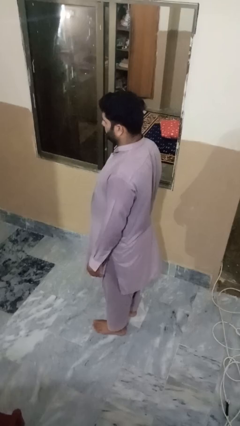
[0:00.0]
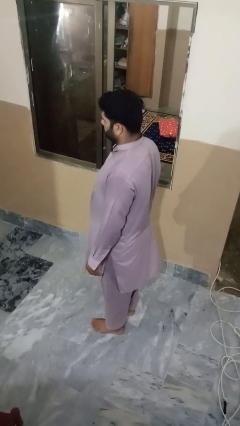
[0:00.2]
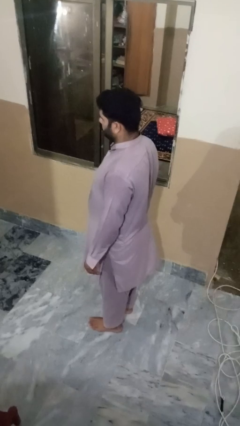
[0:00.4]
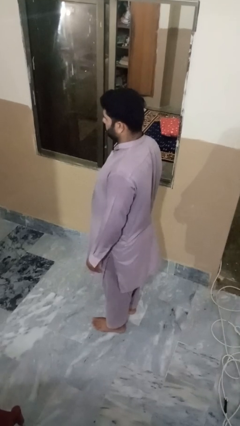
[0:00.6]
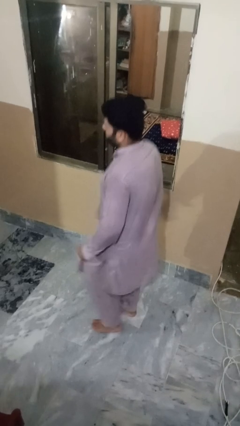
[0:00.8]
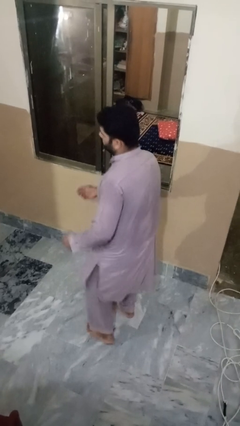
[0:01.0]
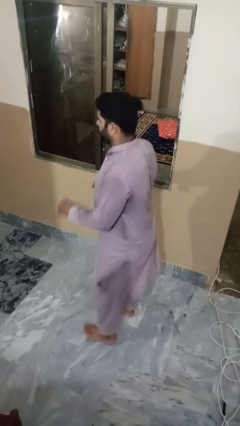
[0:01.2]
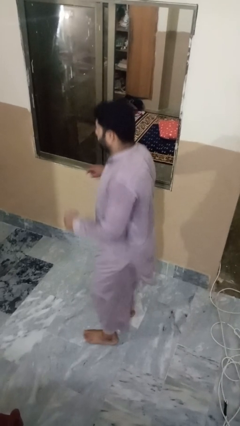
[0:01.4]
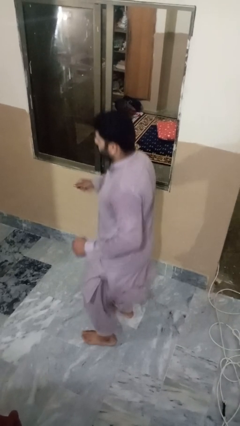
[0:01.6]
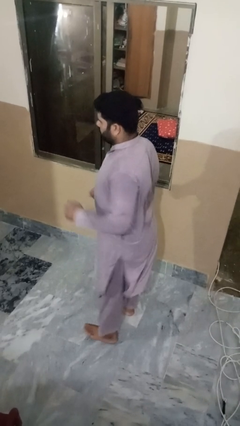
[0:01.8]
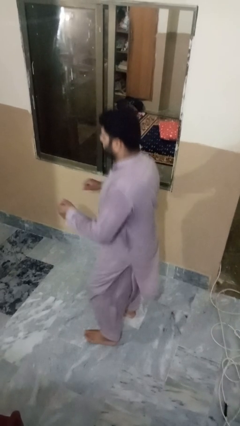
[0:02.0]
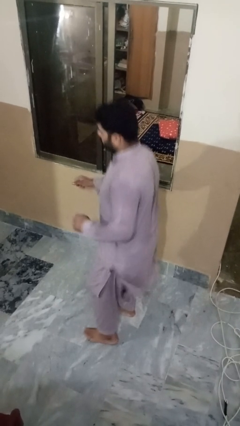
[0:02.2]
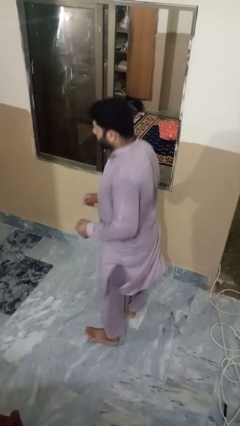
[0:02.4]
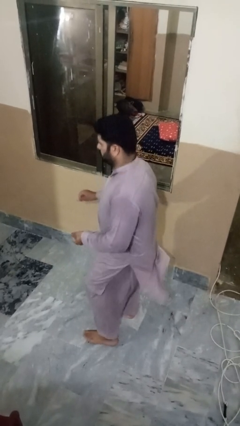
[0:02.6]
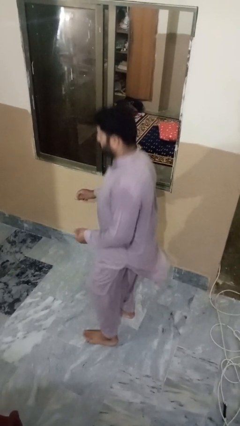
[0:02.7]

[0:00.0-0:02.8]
person dances in place

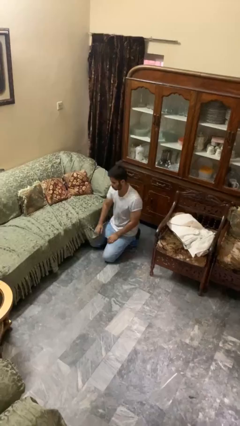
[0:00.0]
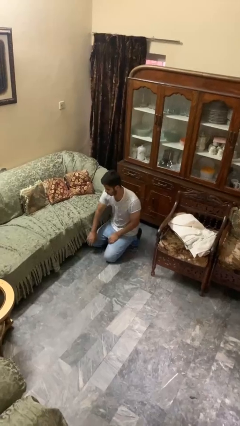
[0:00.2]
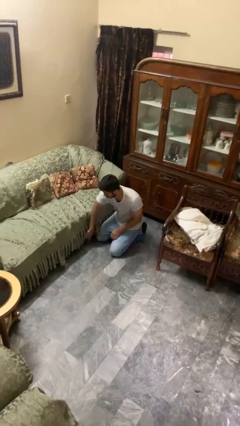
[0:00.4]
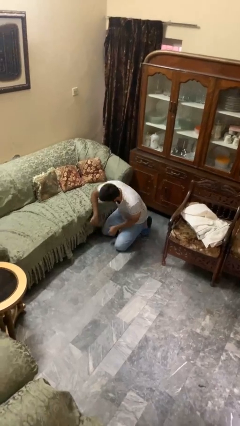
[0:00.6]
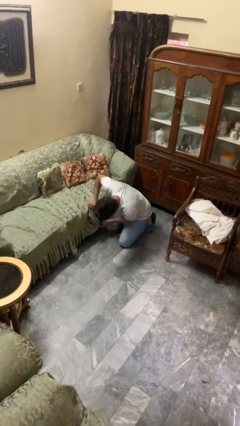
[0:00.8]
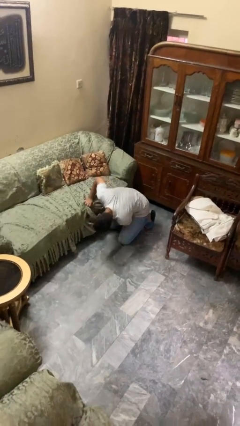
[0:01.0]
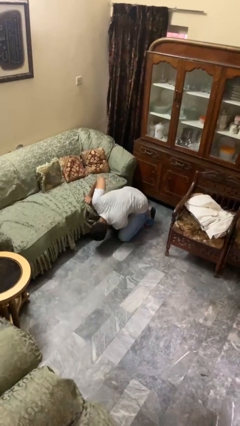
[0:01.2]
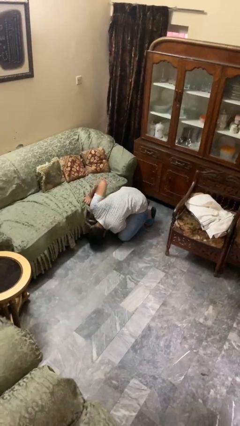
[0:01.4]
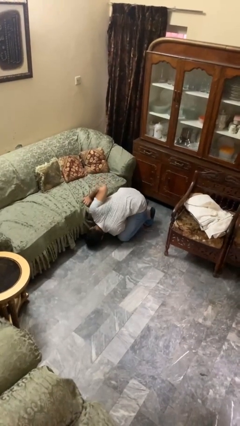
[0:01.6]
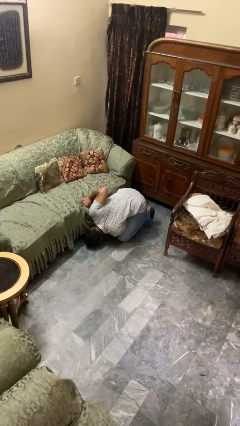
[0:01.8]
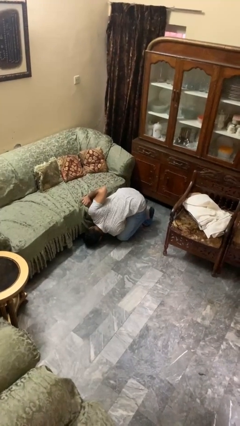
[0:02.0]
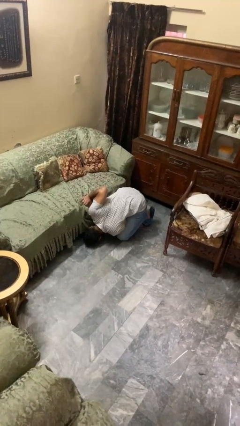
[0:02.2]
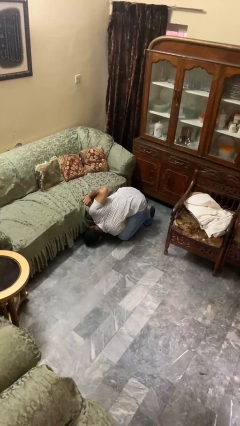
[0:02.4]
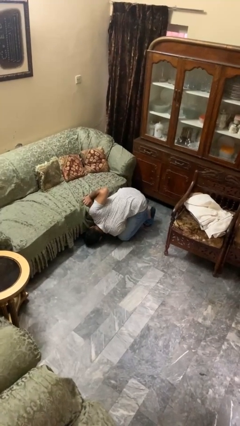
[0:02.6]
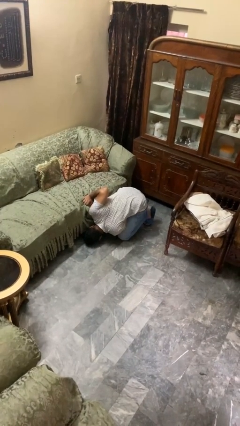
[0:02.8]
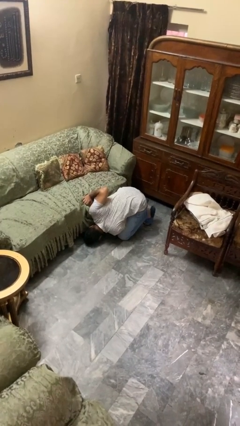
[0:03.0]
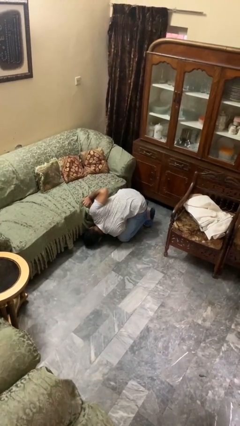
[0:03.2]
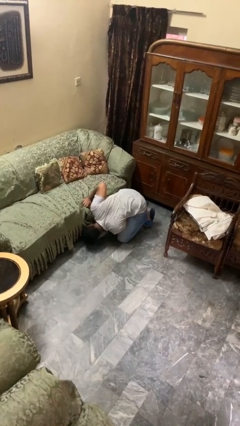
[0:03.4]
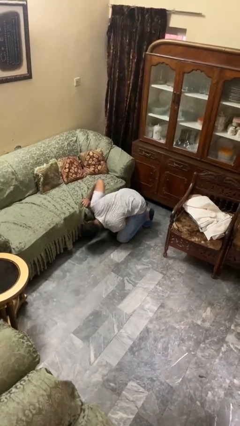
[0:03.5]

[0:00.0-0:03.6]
person searches under couch

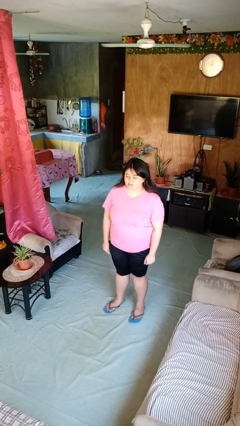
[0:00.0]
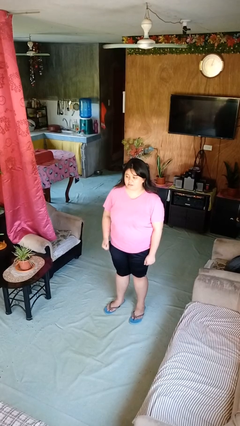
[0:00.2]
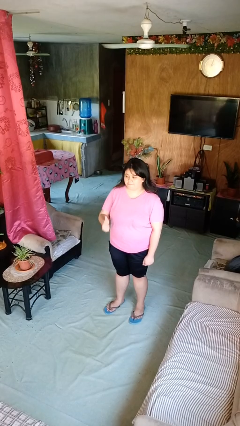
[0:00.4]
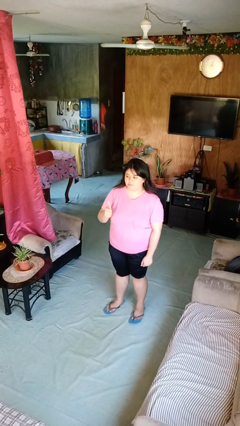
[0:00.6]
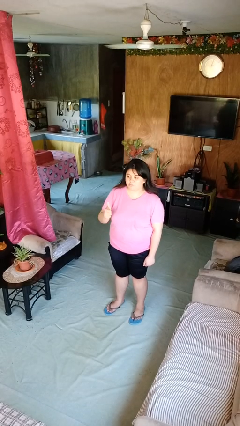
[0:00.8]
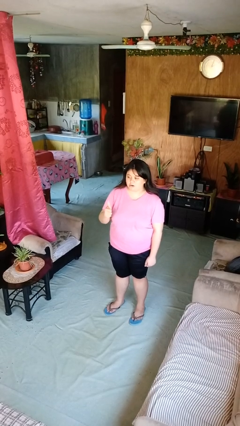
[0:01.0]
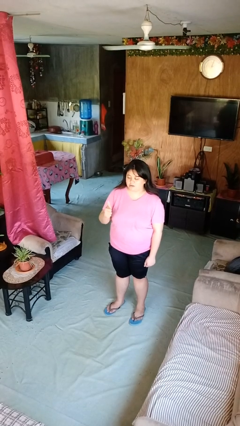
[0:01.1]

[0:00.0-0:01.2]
person gestures thumbs up

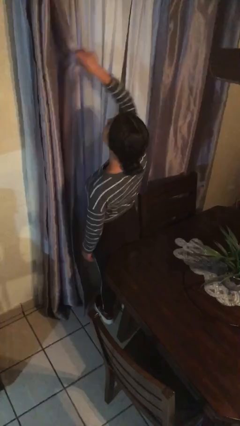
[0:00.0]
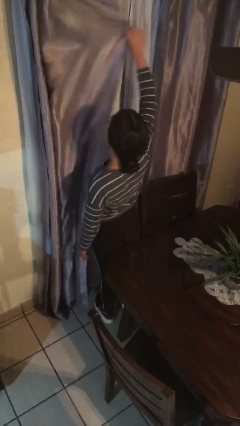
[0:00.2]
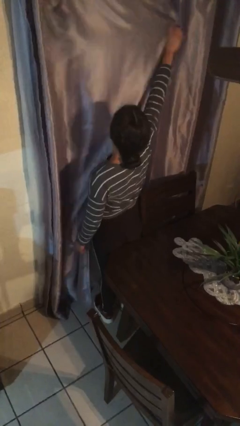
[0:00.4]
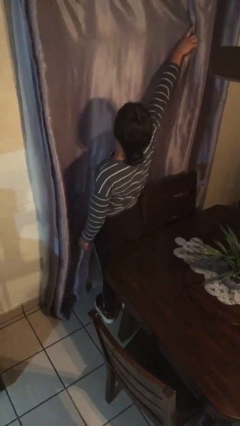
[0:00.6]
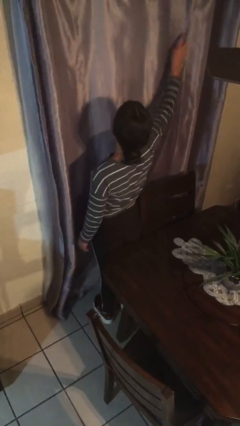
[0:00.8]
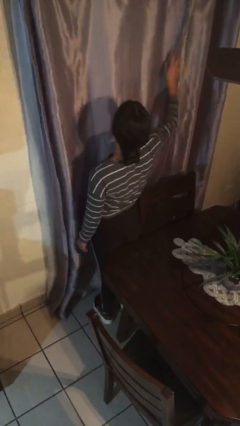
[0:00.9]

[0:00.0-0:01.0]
person closes curtains

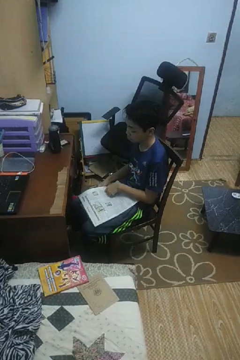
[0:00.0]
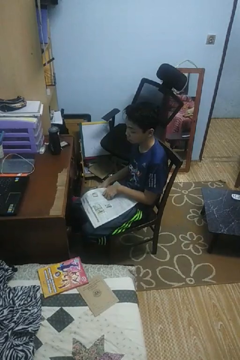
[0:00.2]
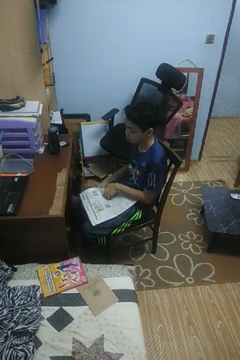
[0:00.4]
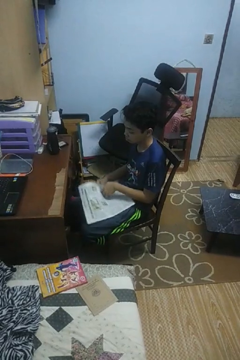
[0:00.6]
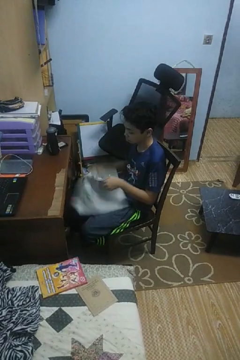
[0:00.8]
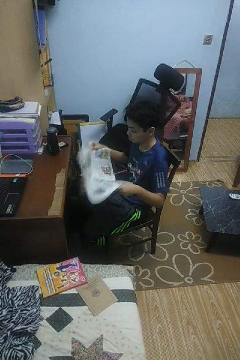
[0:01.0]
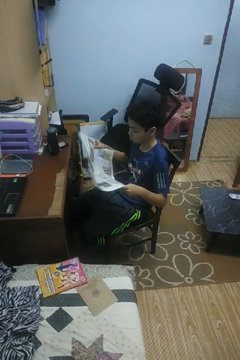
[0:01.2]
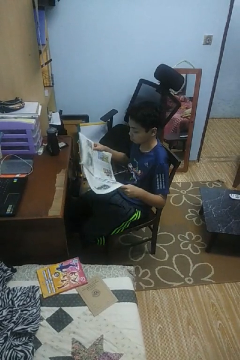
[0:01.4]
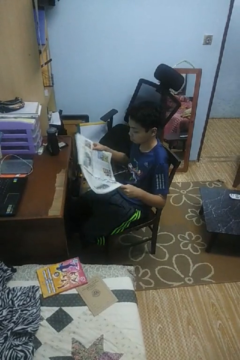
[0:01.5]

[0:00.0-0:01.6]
person reads newspaper

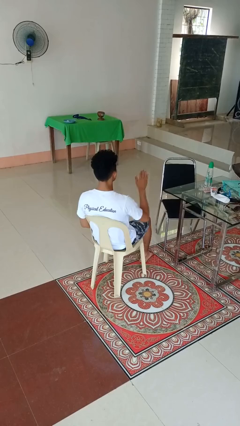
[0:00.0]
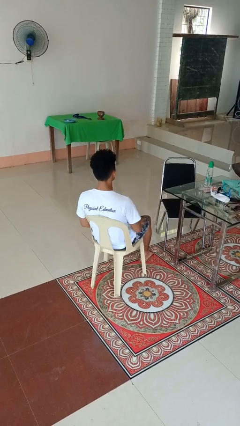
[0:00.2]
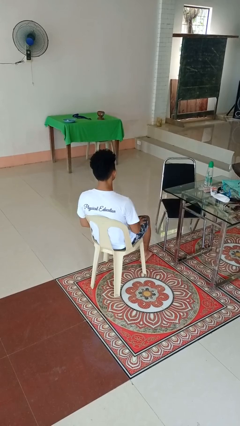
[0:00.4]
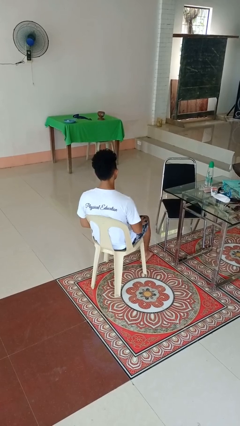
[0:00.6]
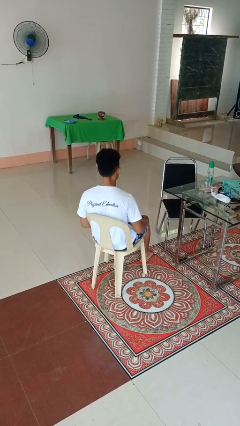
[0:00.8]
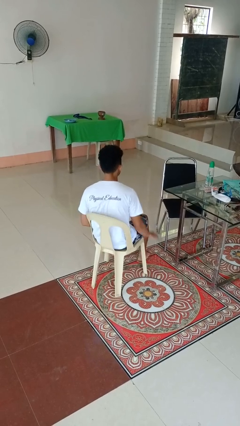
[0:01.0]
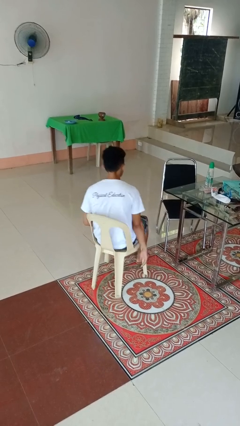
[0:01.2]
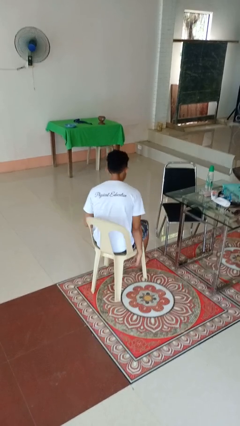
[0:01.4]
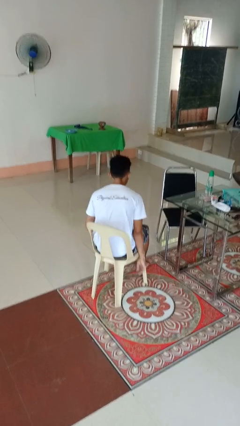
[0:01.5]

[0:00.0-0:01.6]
person slaps hands on thighs

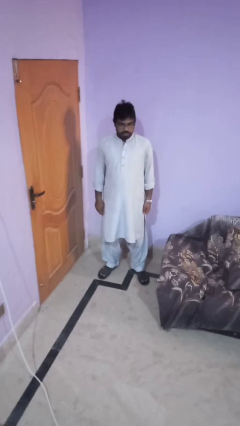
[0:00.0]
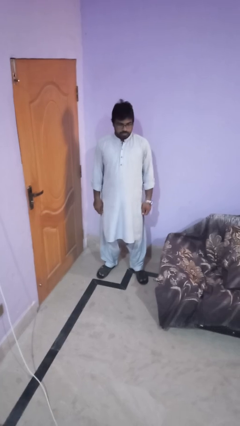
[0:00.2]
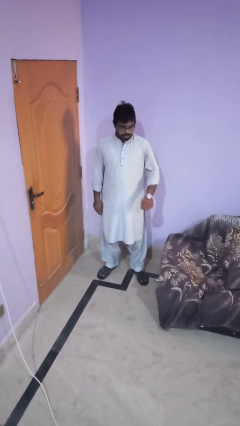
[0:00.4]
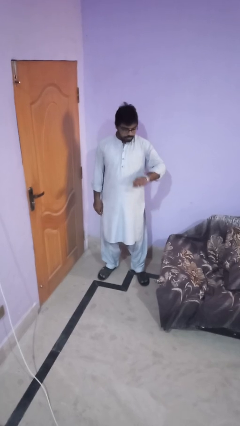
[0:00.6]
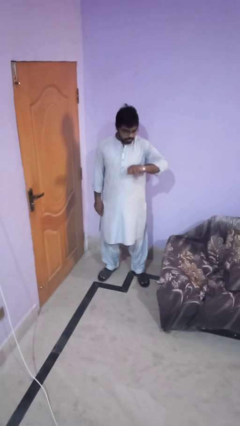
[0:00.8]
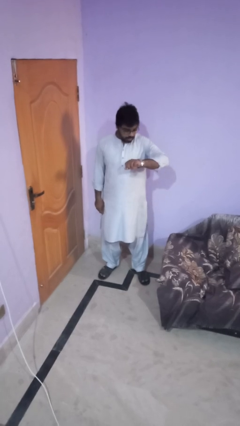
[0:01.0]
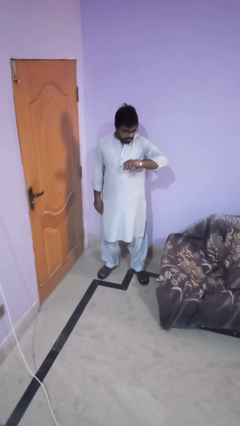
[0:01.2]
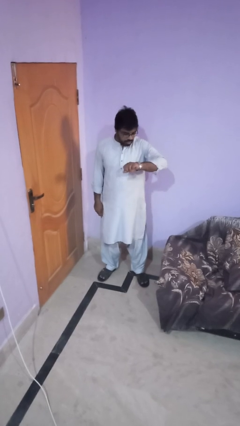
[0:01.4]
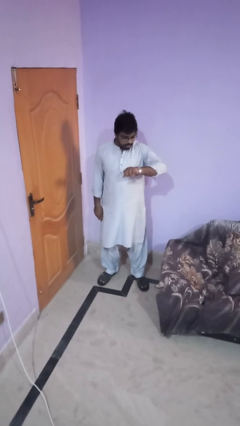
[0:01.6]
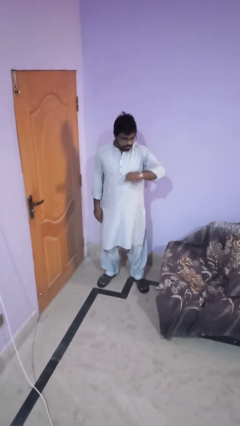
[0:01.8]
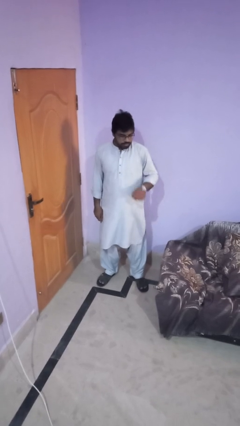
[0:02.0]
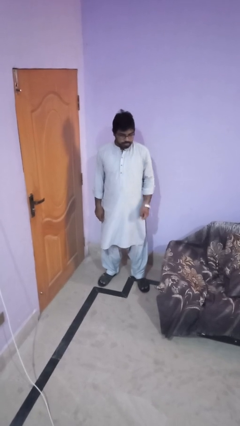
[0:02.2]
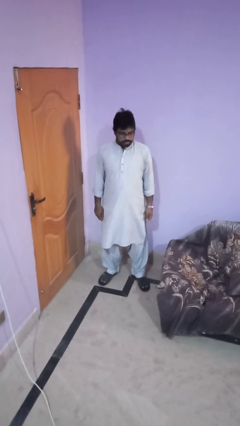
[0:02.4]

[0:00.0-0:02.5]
person looks at wristwatch

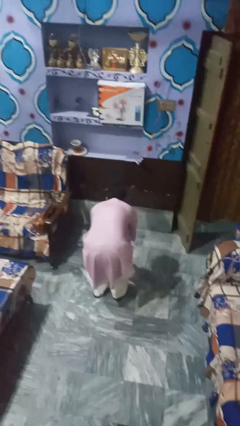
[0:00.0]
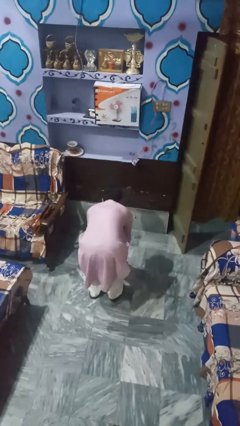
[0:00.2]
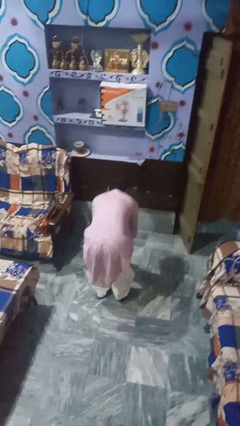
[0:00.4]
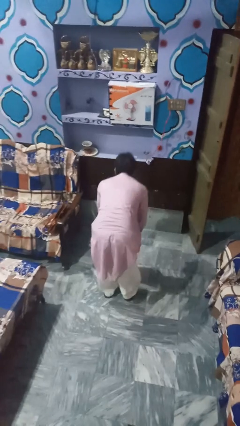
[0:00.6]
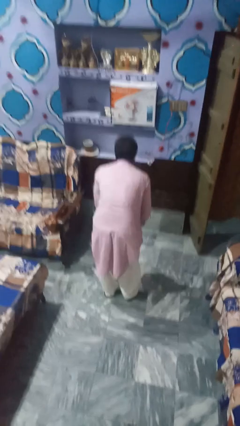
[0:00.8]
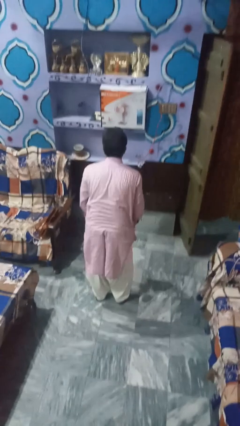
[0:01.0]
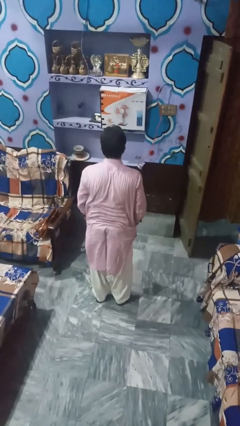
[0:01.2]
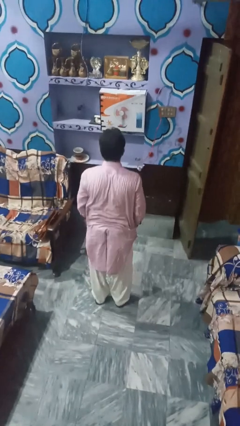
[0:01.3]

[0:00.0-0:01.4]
person picks up object from floor

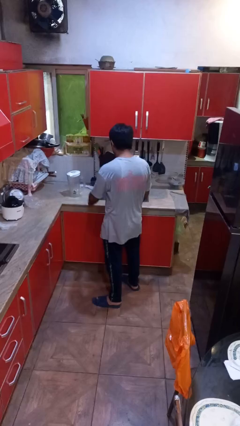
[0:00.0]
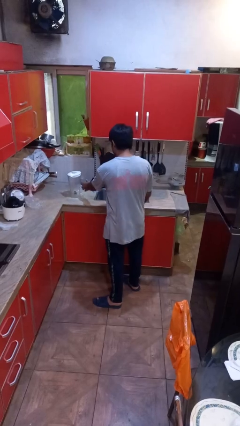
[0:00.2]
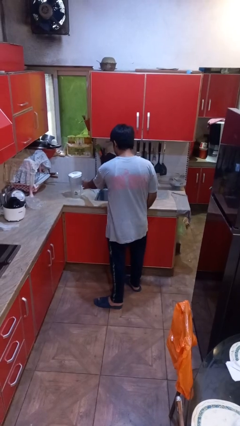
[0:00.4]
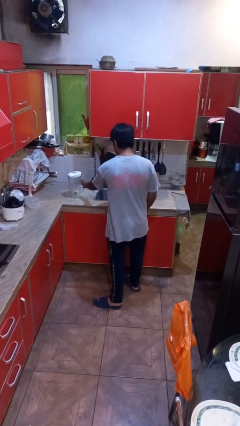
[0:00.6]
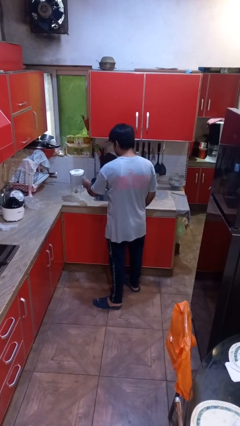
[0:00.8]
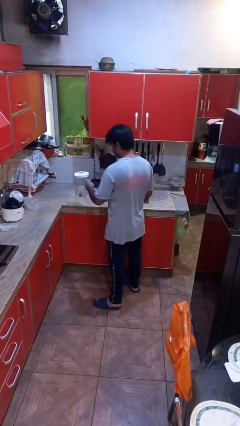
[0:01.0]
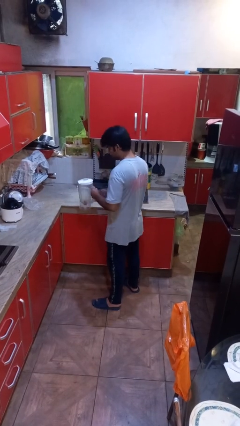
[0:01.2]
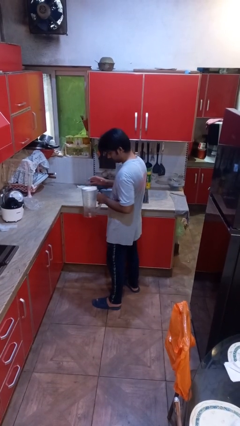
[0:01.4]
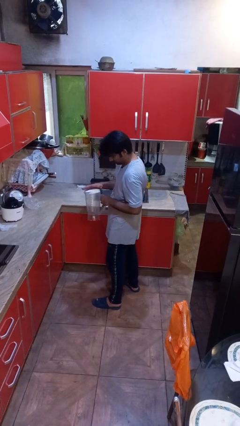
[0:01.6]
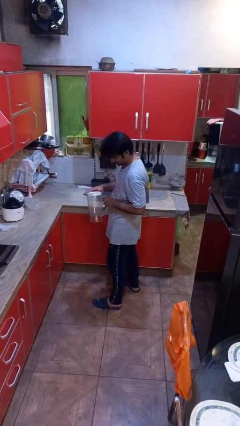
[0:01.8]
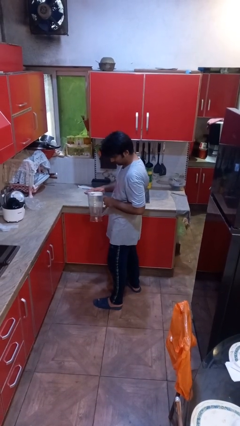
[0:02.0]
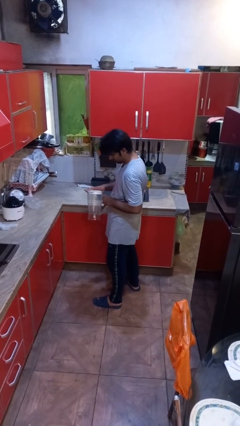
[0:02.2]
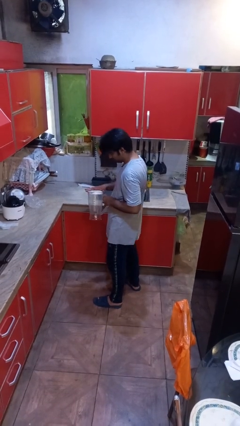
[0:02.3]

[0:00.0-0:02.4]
person picks up object from countertop
